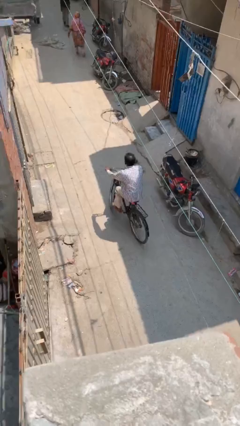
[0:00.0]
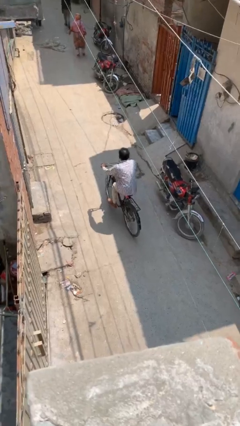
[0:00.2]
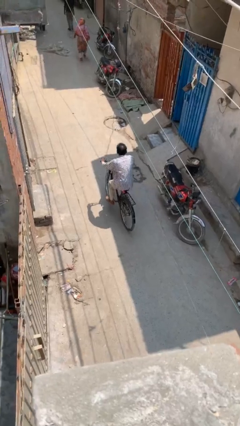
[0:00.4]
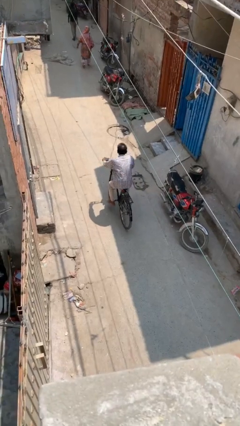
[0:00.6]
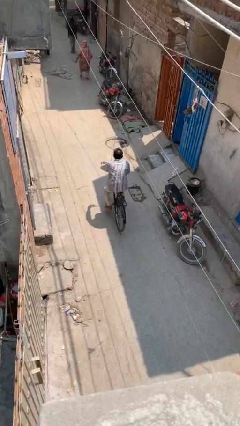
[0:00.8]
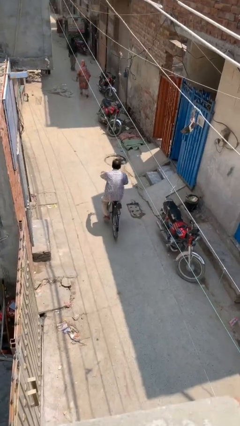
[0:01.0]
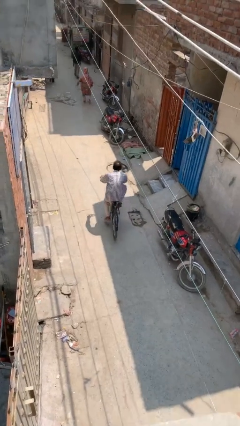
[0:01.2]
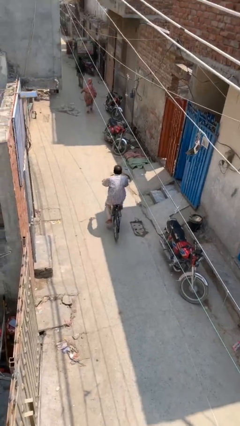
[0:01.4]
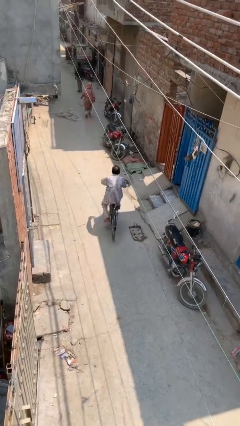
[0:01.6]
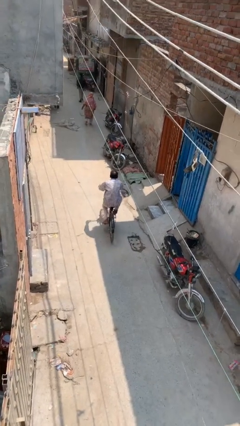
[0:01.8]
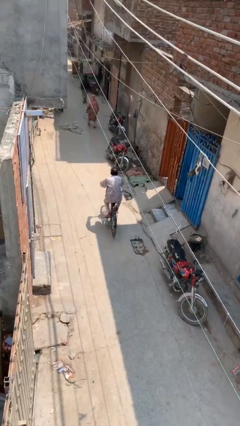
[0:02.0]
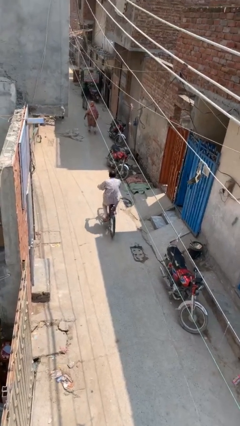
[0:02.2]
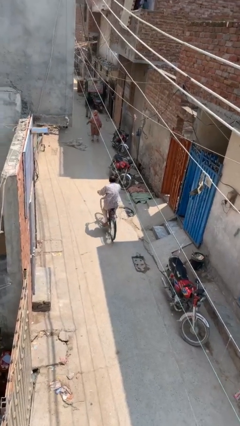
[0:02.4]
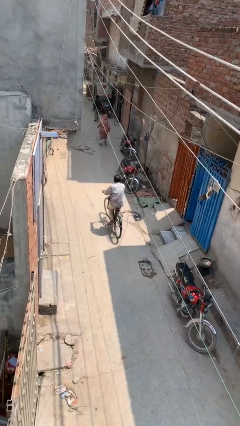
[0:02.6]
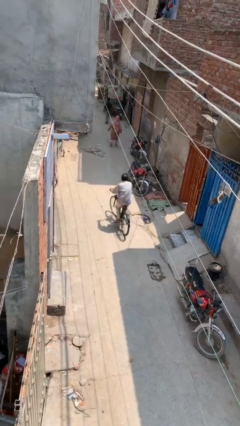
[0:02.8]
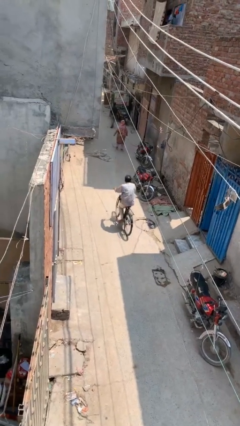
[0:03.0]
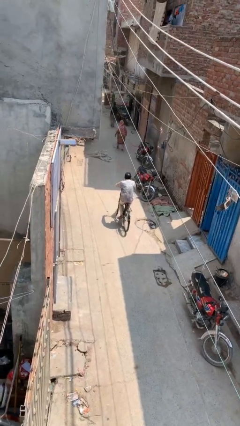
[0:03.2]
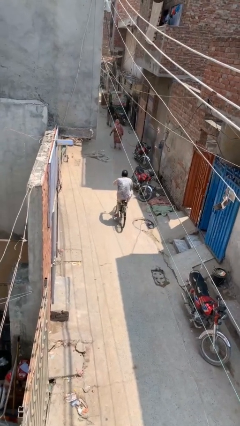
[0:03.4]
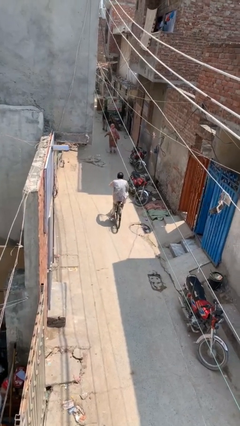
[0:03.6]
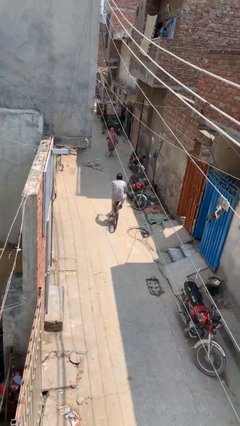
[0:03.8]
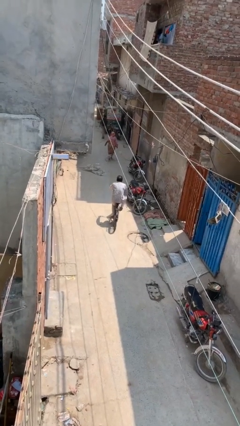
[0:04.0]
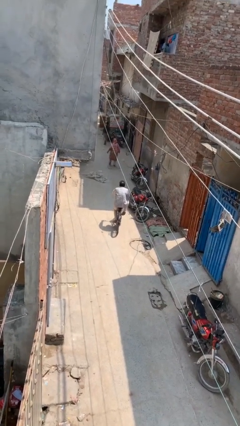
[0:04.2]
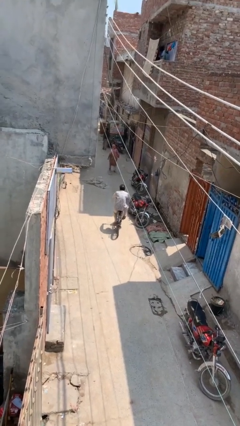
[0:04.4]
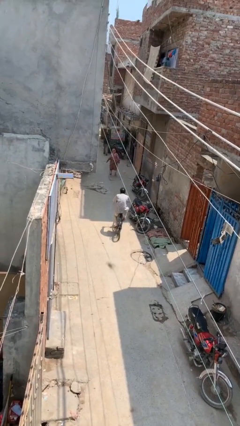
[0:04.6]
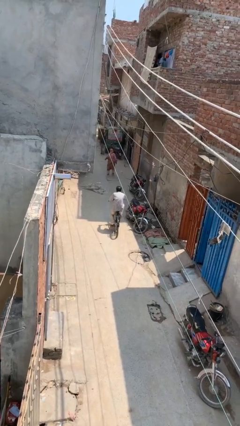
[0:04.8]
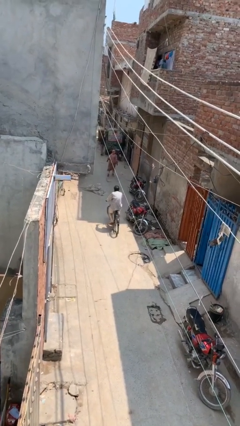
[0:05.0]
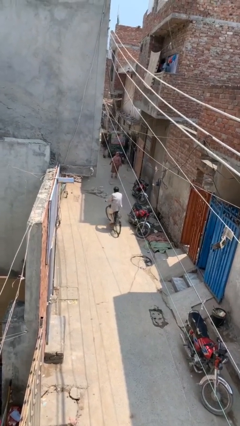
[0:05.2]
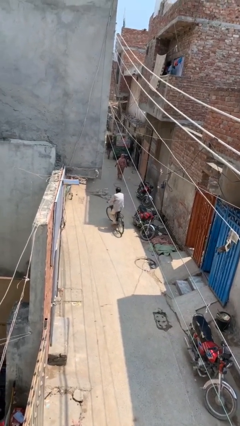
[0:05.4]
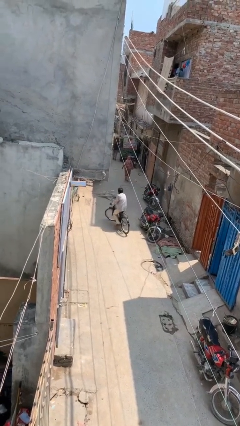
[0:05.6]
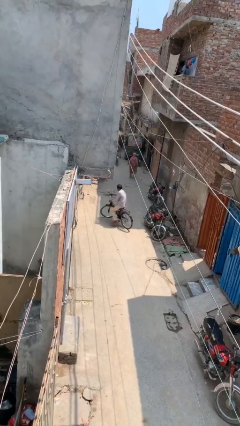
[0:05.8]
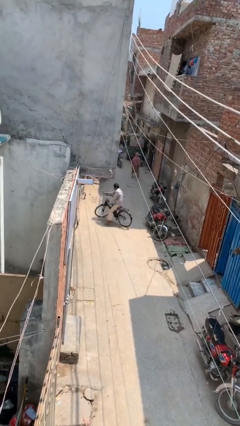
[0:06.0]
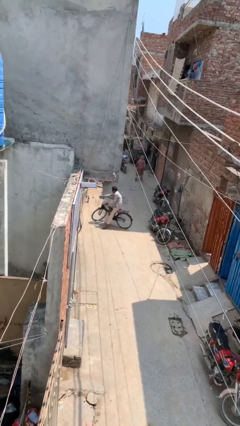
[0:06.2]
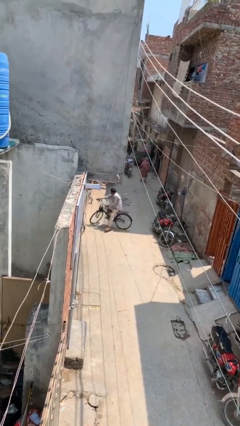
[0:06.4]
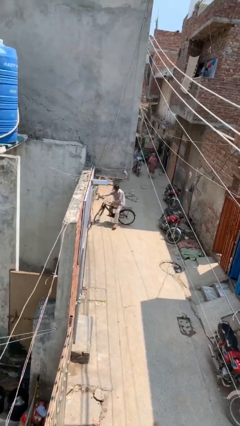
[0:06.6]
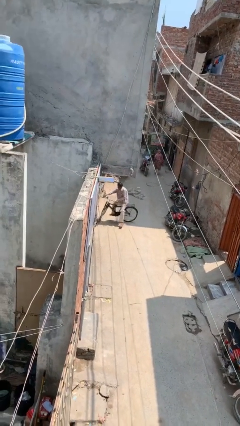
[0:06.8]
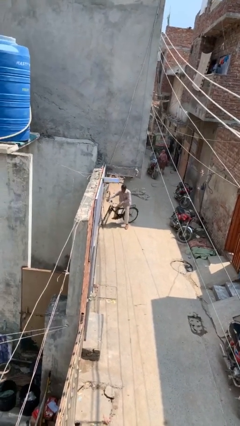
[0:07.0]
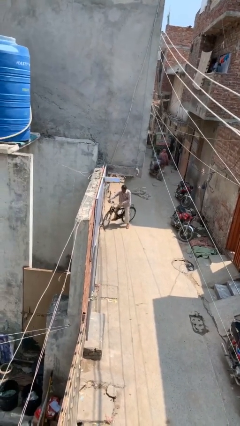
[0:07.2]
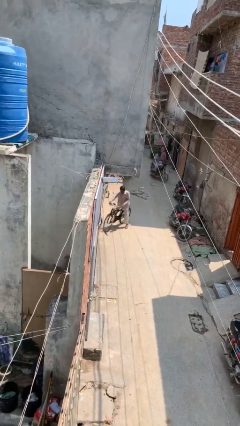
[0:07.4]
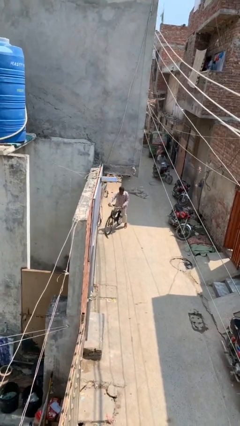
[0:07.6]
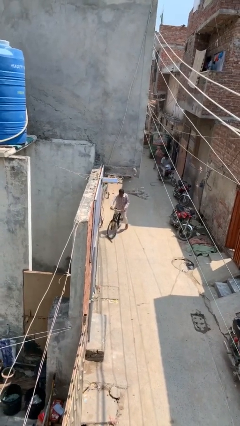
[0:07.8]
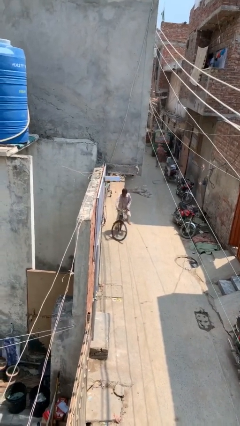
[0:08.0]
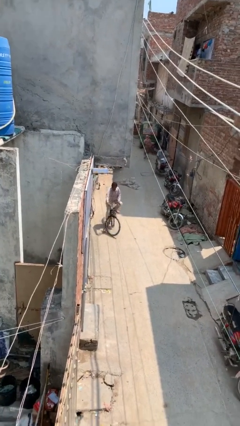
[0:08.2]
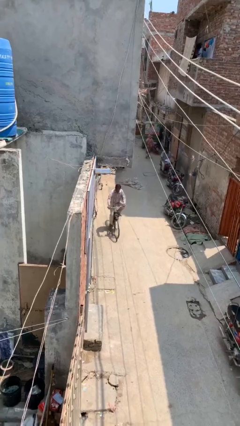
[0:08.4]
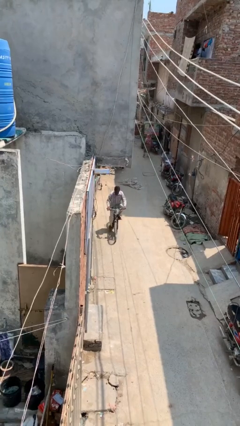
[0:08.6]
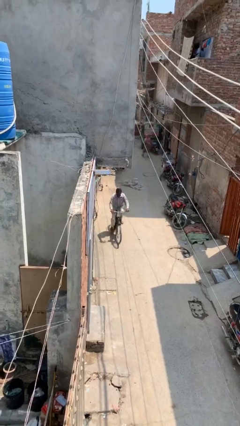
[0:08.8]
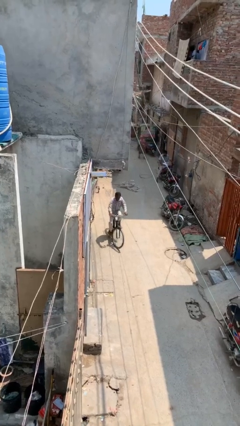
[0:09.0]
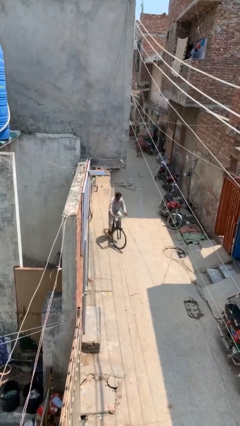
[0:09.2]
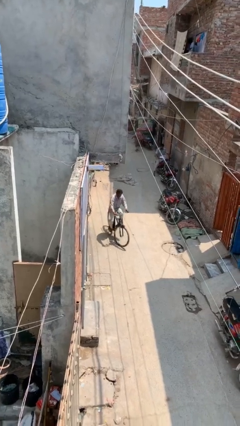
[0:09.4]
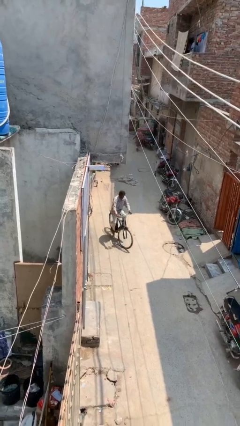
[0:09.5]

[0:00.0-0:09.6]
person rides bicycle

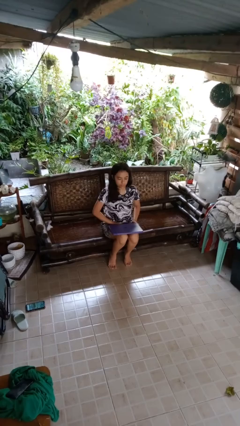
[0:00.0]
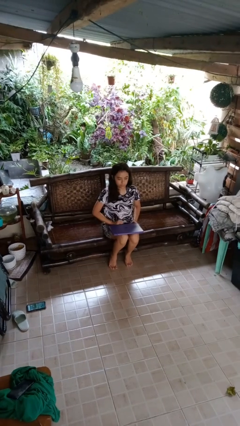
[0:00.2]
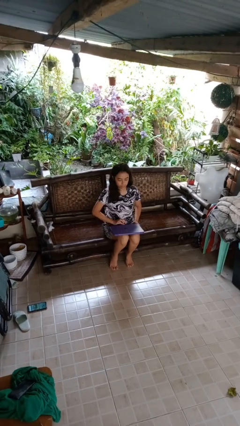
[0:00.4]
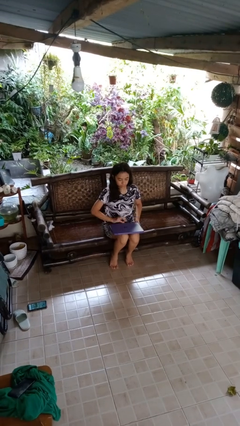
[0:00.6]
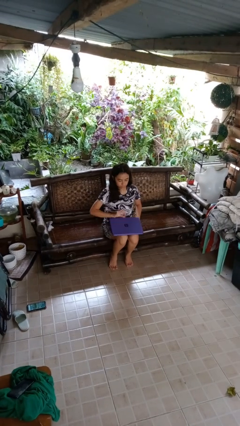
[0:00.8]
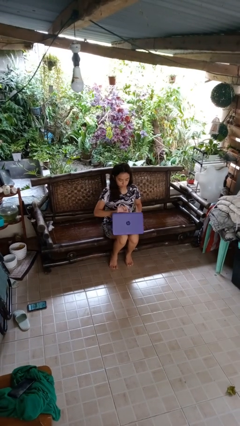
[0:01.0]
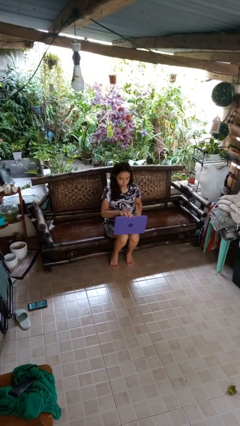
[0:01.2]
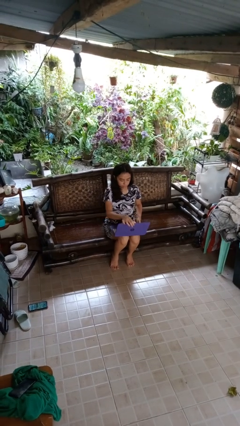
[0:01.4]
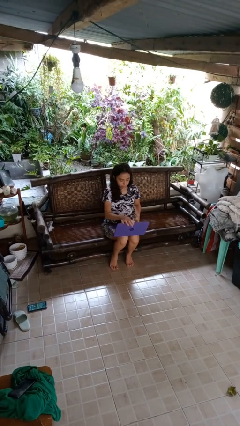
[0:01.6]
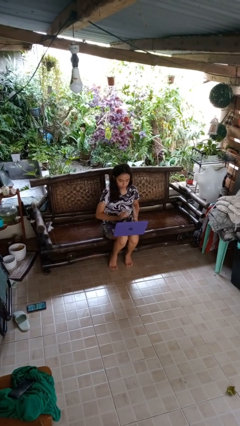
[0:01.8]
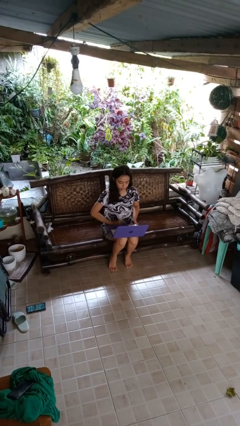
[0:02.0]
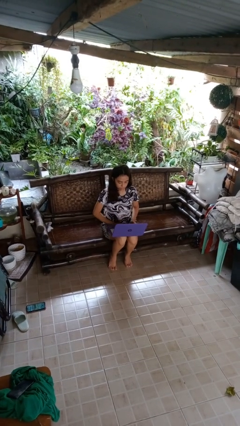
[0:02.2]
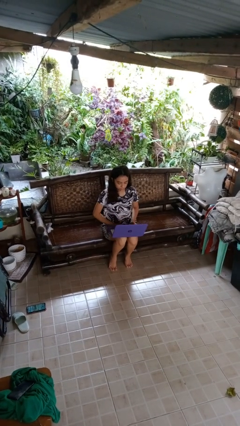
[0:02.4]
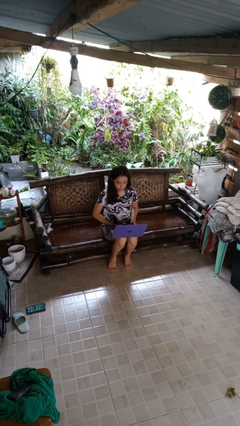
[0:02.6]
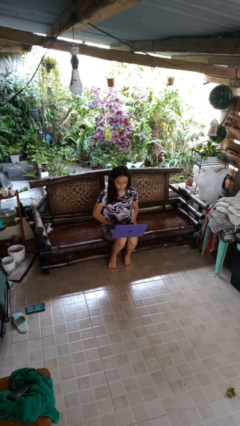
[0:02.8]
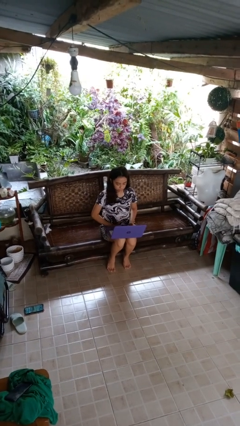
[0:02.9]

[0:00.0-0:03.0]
person opens laptop

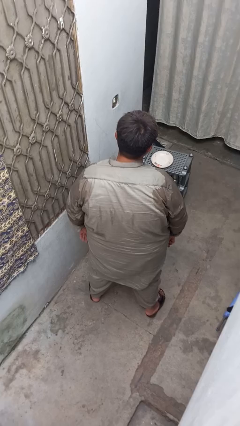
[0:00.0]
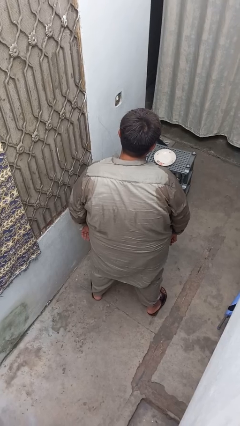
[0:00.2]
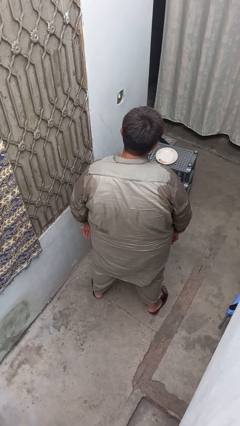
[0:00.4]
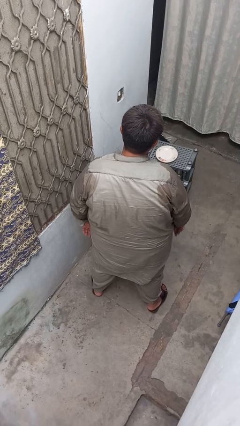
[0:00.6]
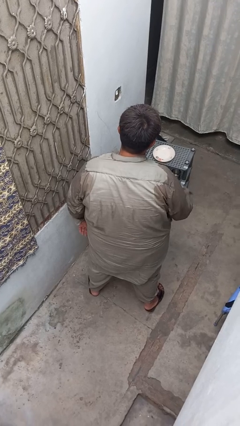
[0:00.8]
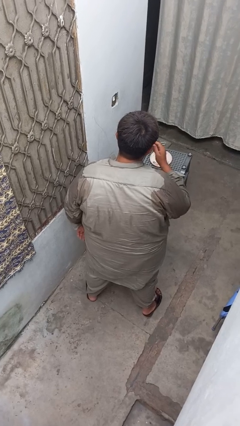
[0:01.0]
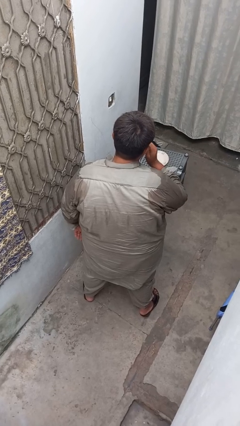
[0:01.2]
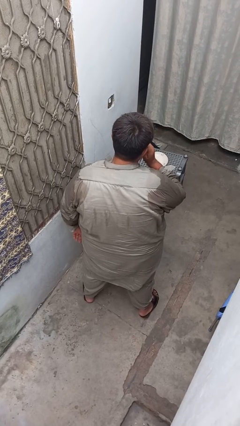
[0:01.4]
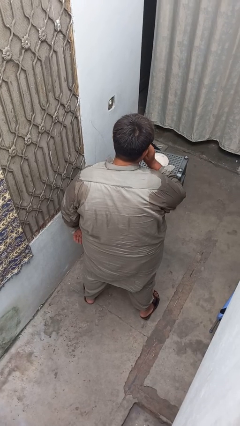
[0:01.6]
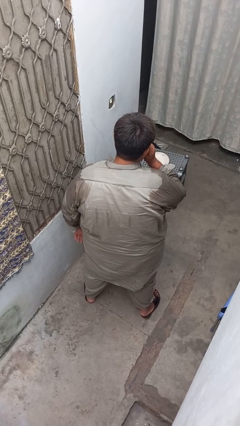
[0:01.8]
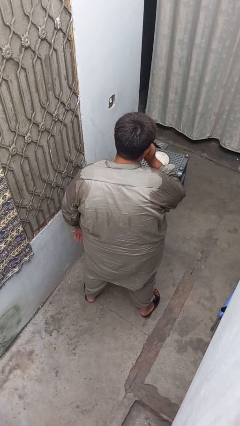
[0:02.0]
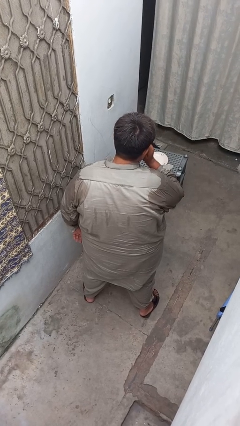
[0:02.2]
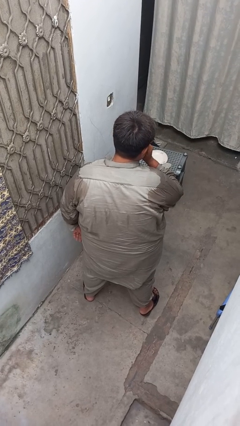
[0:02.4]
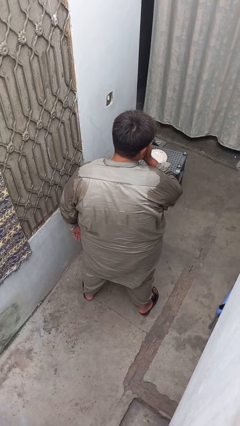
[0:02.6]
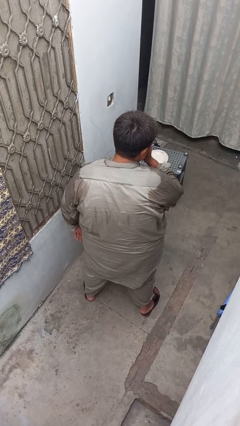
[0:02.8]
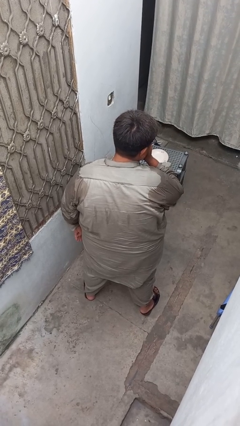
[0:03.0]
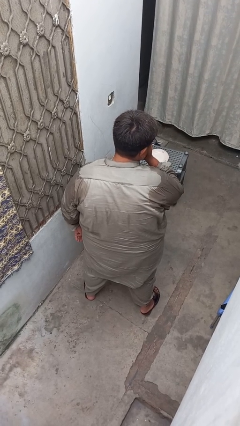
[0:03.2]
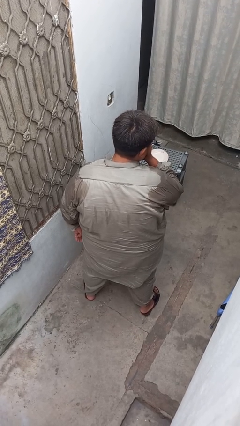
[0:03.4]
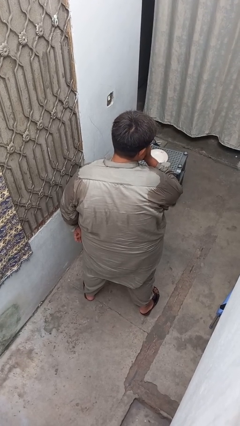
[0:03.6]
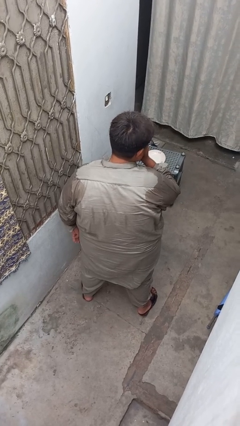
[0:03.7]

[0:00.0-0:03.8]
person flosses

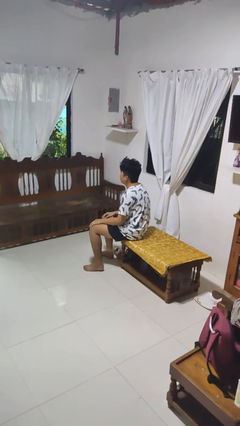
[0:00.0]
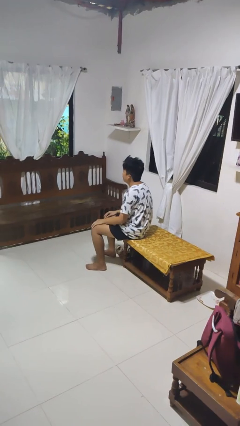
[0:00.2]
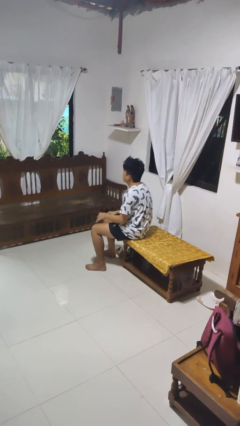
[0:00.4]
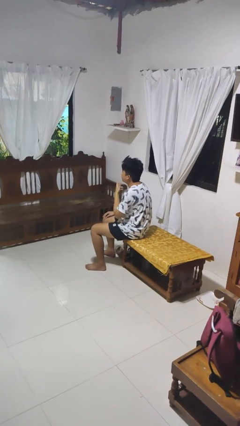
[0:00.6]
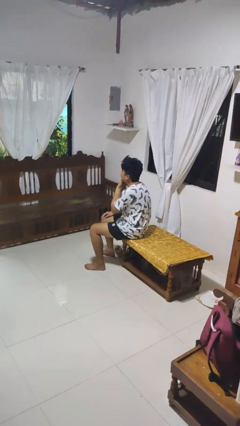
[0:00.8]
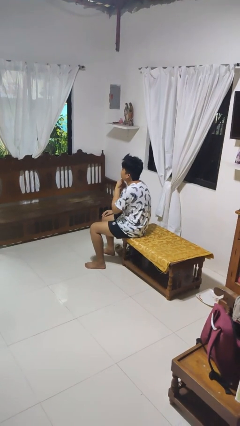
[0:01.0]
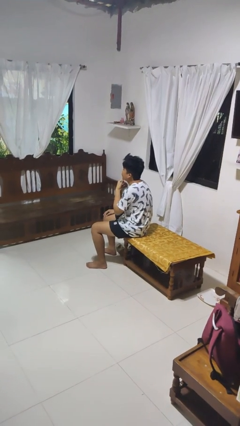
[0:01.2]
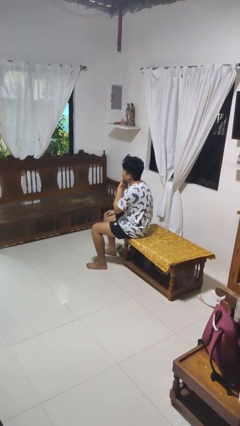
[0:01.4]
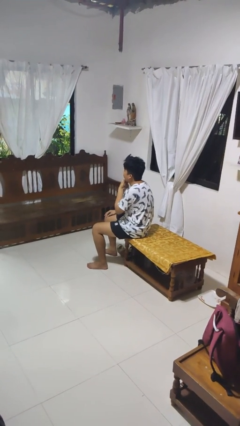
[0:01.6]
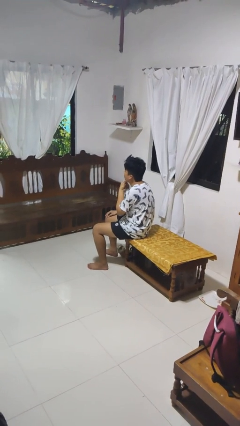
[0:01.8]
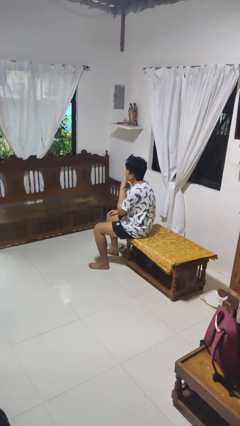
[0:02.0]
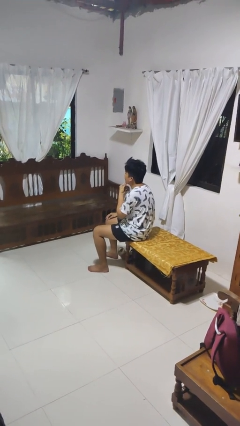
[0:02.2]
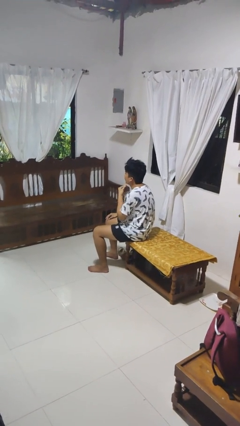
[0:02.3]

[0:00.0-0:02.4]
person strokes chin
